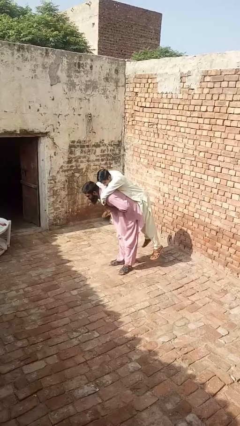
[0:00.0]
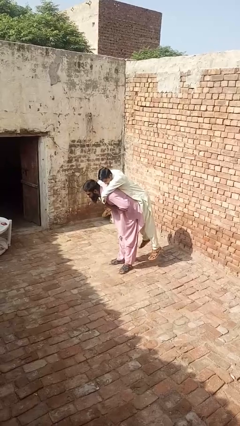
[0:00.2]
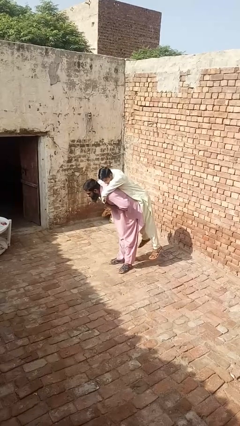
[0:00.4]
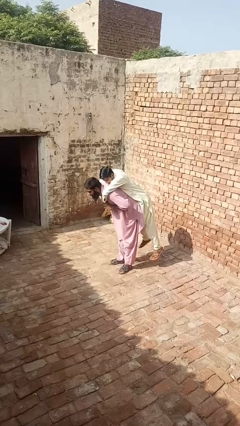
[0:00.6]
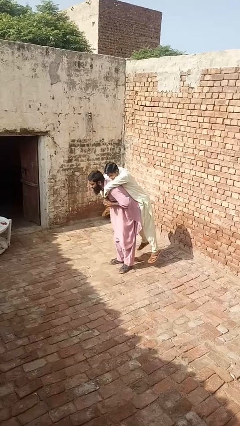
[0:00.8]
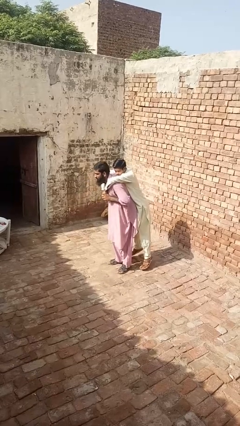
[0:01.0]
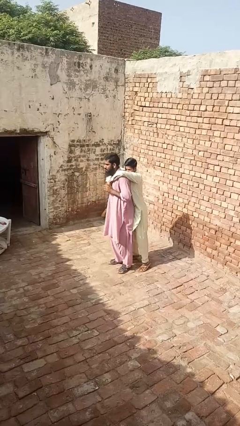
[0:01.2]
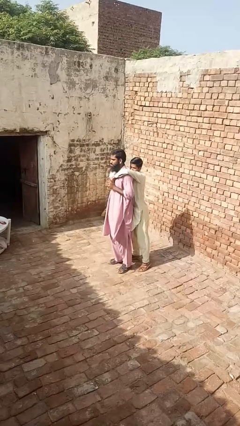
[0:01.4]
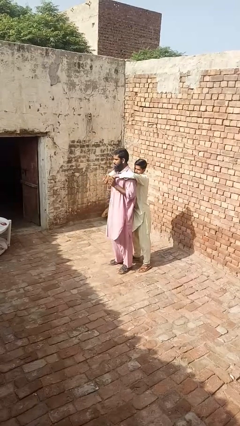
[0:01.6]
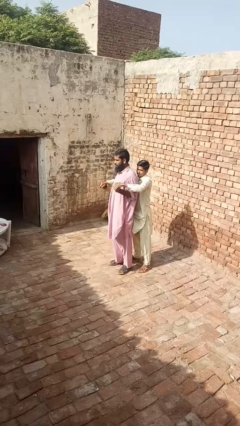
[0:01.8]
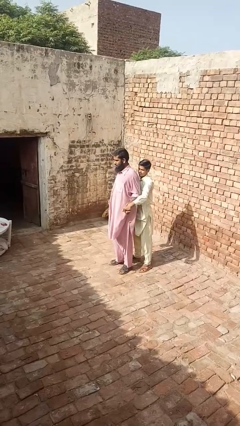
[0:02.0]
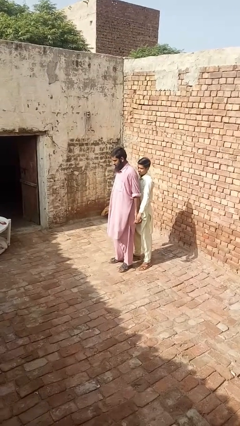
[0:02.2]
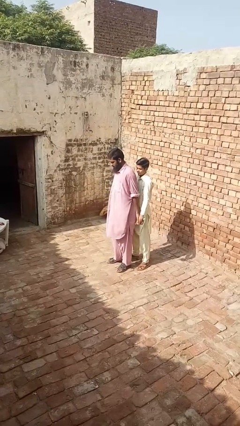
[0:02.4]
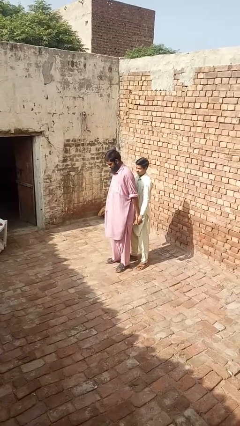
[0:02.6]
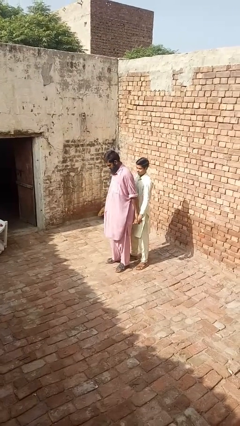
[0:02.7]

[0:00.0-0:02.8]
person puts down person

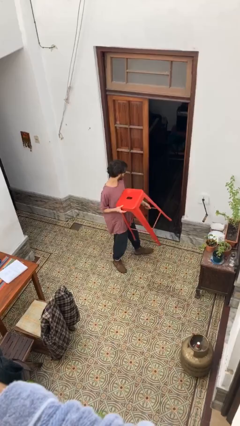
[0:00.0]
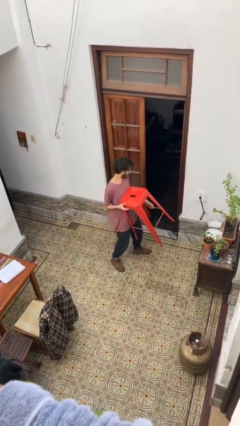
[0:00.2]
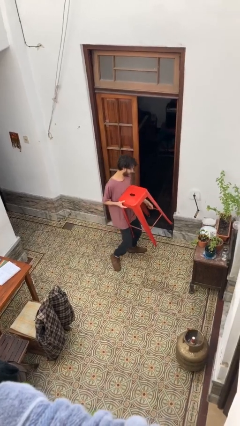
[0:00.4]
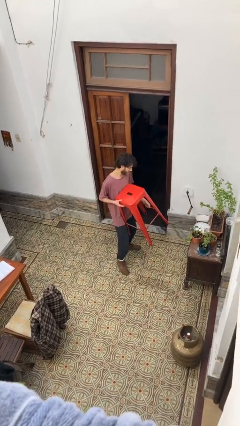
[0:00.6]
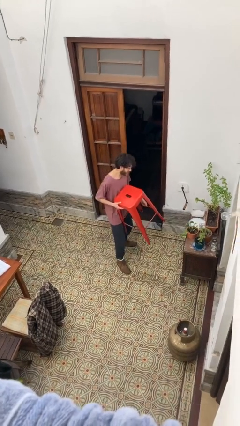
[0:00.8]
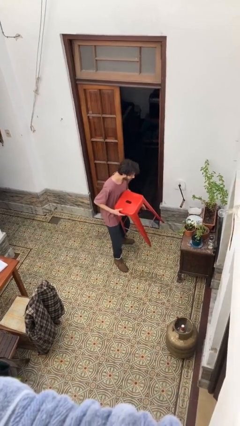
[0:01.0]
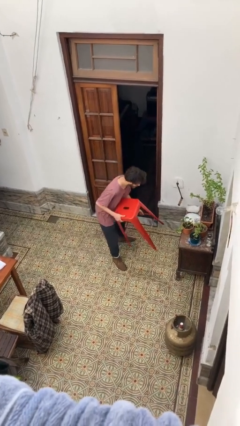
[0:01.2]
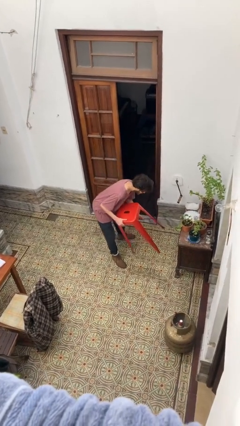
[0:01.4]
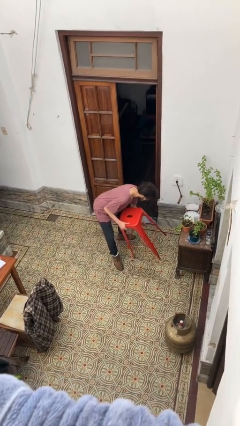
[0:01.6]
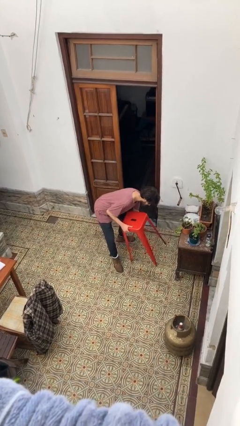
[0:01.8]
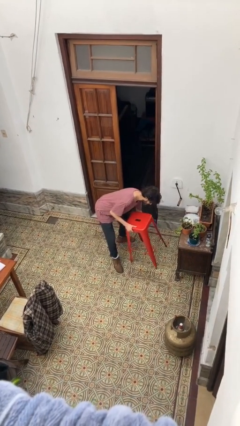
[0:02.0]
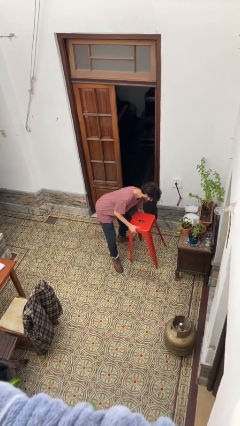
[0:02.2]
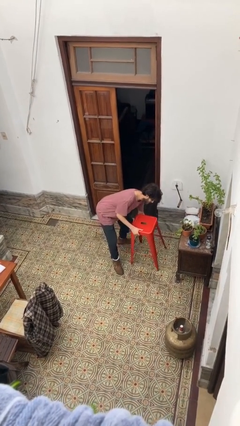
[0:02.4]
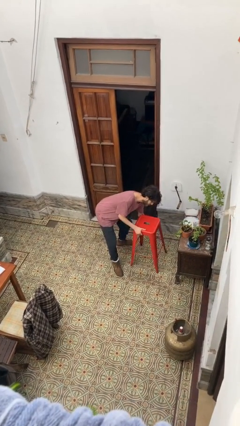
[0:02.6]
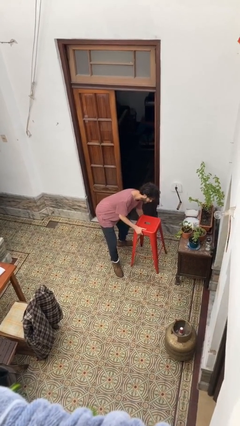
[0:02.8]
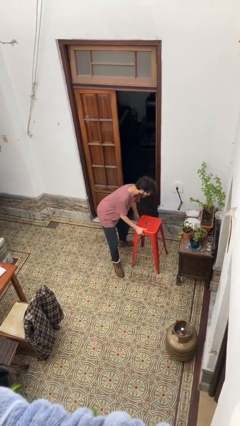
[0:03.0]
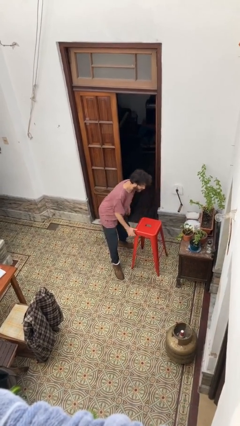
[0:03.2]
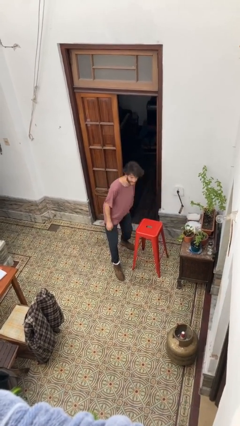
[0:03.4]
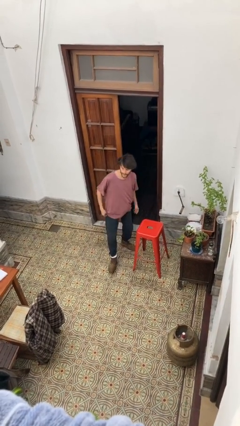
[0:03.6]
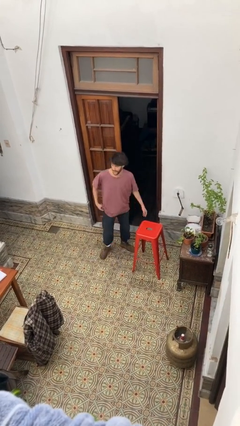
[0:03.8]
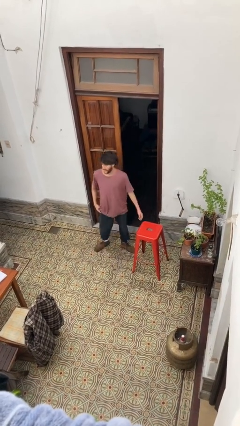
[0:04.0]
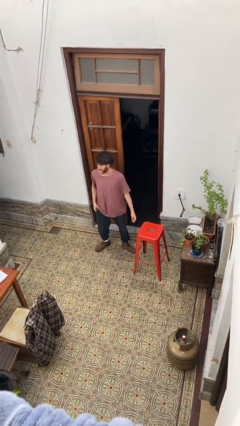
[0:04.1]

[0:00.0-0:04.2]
person puts down object on floor

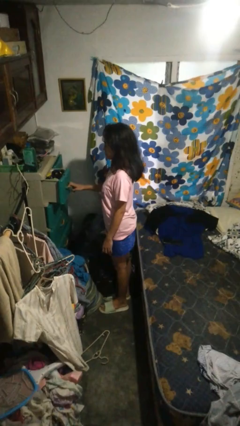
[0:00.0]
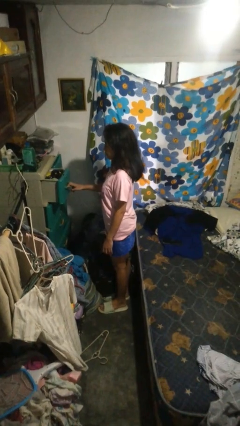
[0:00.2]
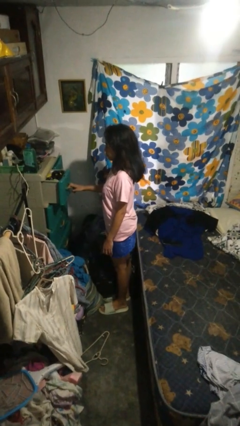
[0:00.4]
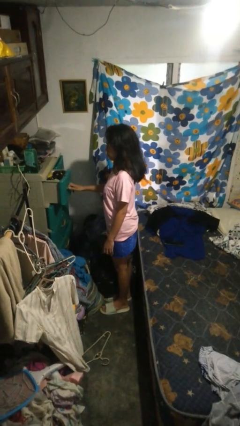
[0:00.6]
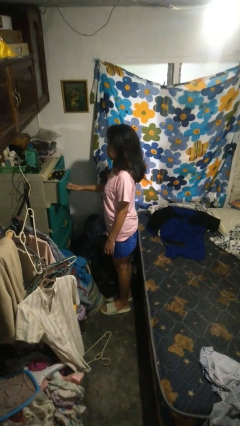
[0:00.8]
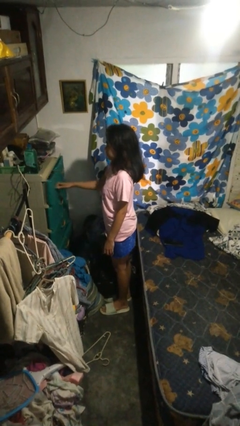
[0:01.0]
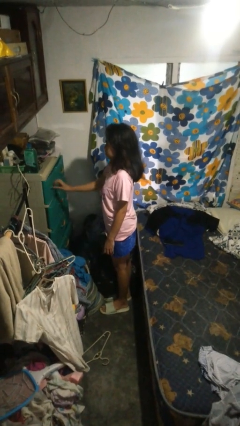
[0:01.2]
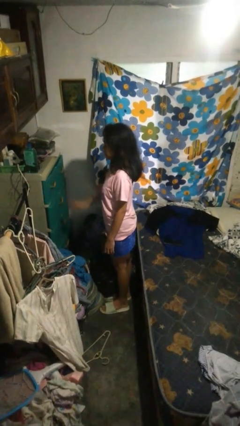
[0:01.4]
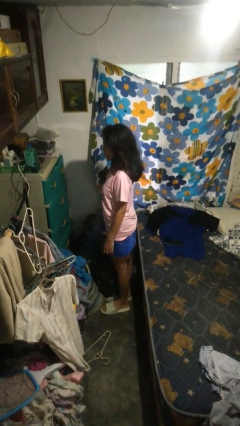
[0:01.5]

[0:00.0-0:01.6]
person closes dresser drawer

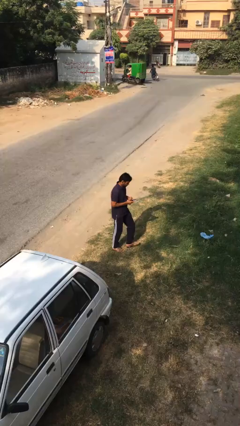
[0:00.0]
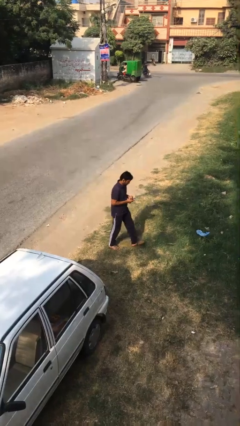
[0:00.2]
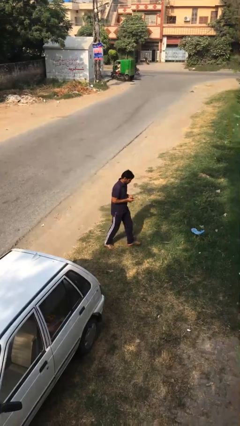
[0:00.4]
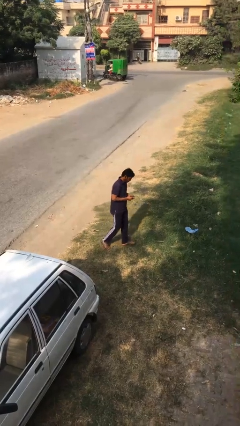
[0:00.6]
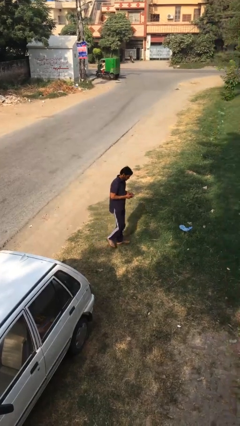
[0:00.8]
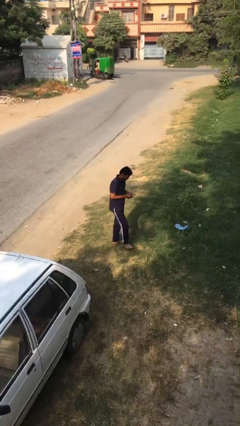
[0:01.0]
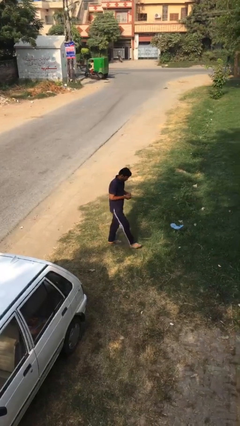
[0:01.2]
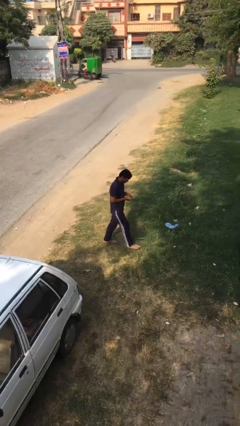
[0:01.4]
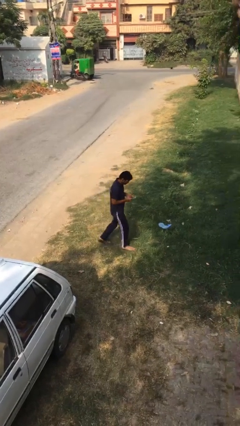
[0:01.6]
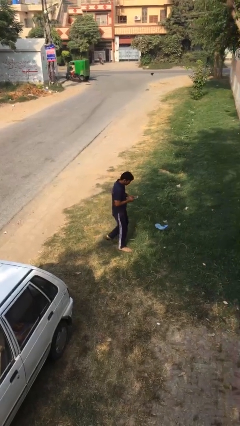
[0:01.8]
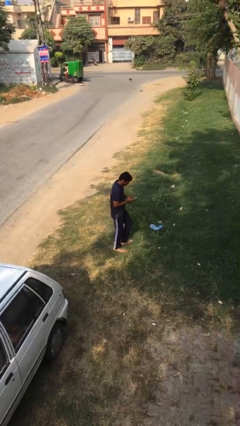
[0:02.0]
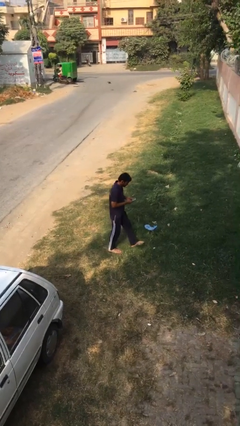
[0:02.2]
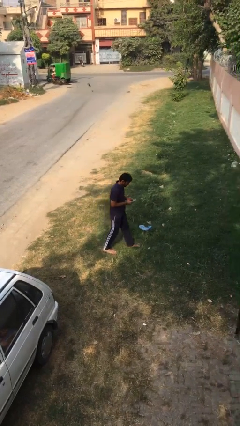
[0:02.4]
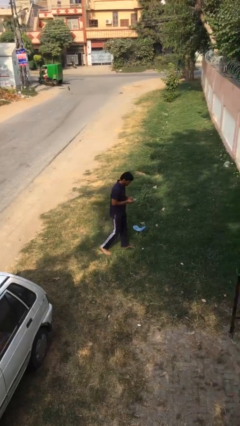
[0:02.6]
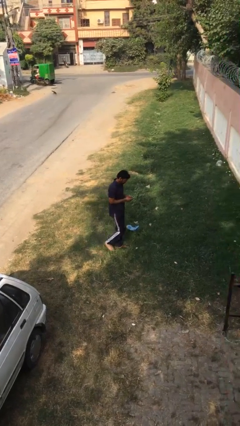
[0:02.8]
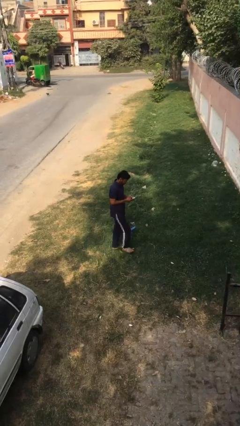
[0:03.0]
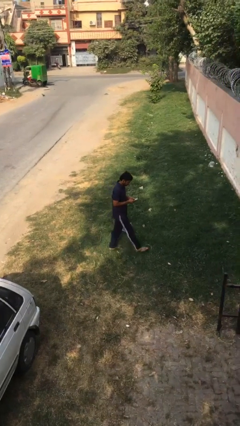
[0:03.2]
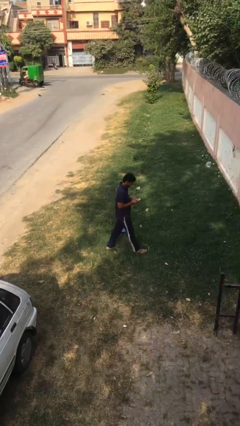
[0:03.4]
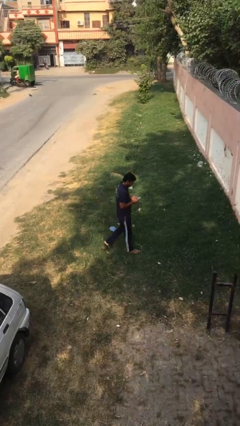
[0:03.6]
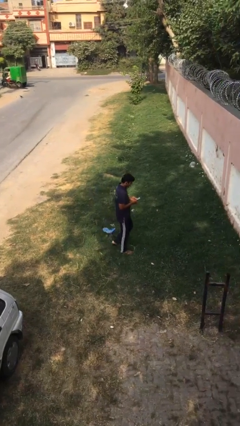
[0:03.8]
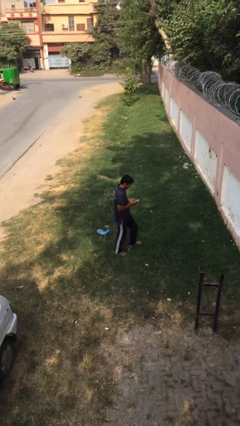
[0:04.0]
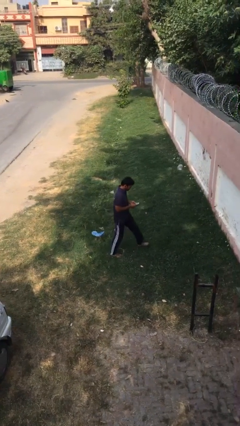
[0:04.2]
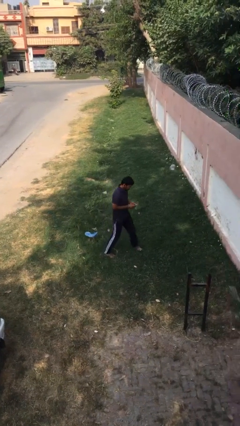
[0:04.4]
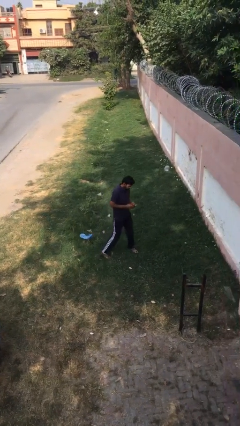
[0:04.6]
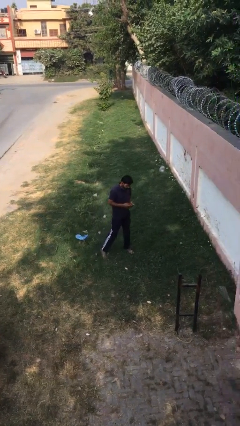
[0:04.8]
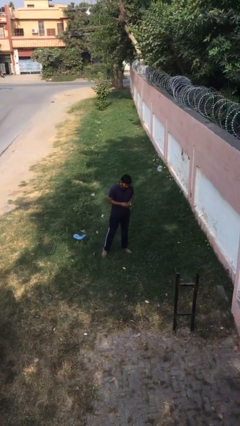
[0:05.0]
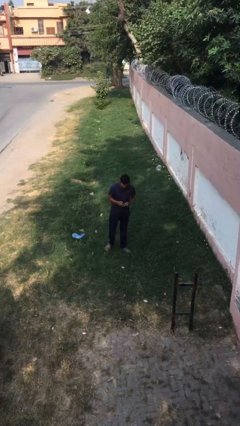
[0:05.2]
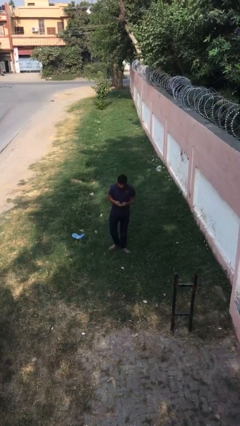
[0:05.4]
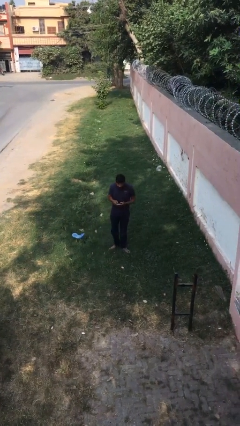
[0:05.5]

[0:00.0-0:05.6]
person texts on phone

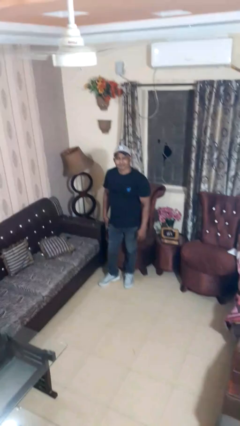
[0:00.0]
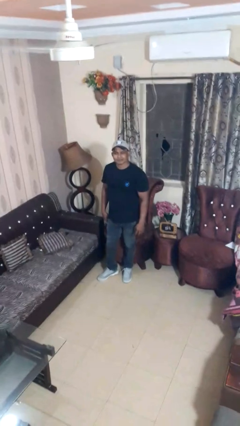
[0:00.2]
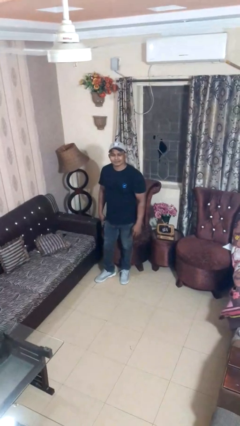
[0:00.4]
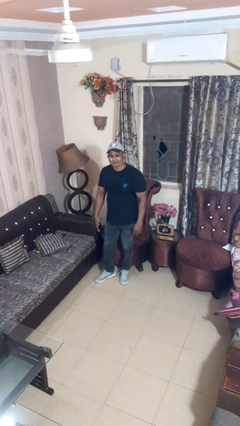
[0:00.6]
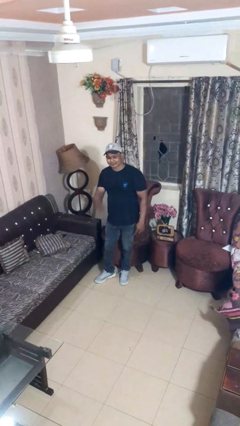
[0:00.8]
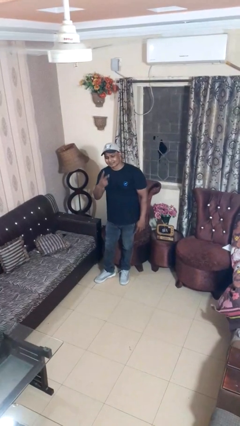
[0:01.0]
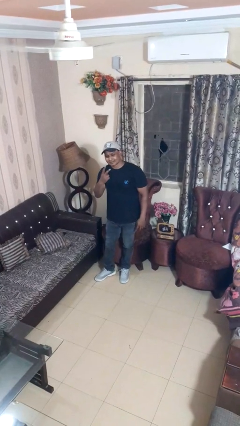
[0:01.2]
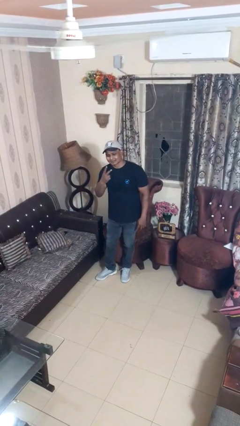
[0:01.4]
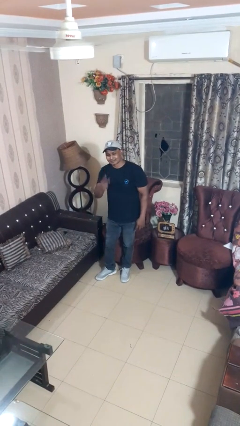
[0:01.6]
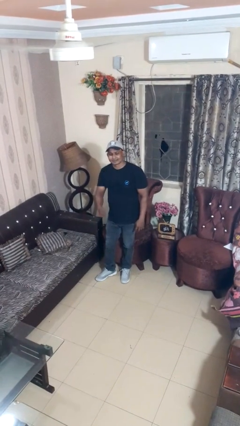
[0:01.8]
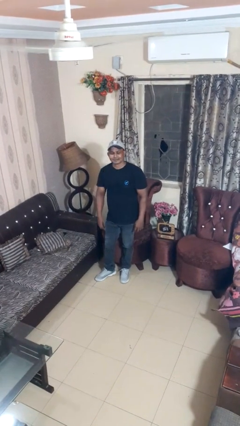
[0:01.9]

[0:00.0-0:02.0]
person gestures peace

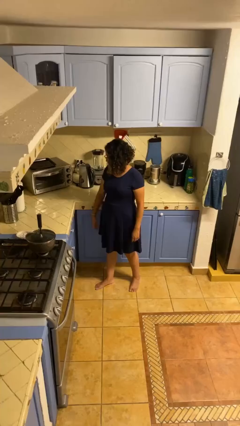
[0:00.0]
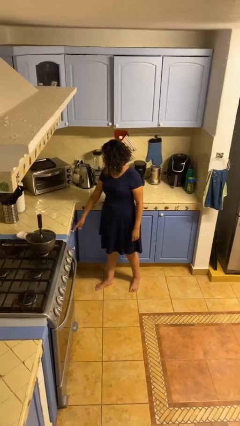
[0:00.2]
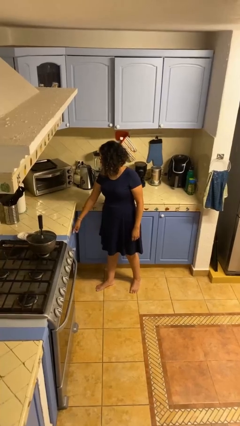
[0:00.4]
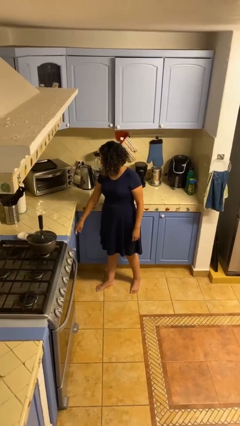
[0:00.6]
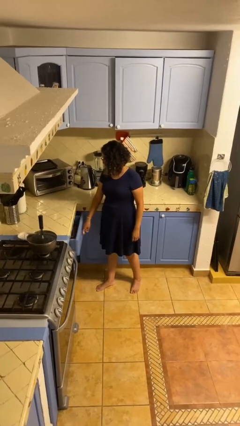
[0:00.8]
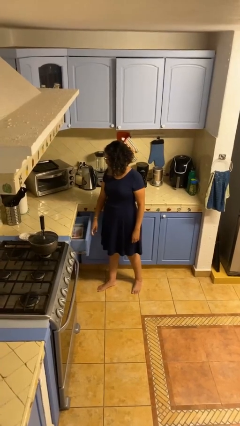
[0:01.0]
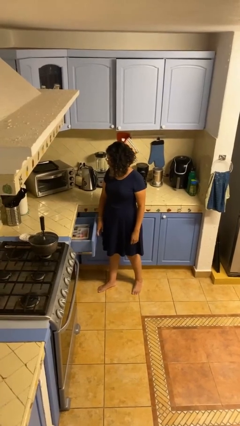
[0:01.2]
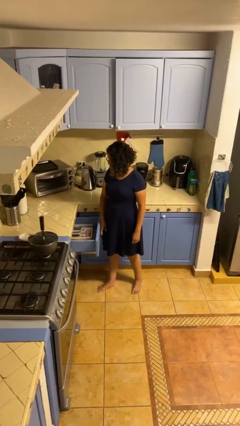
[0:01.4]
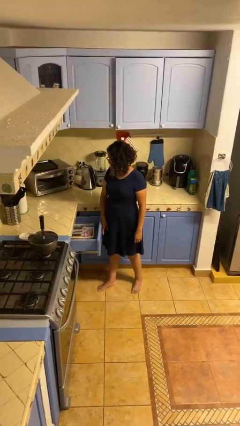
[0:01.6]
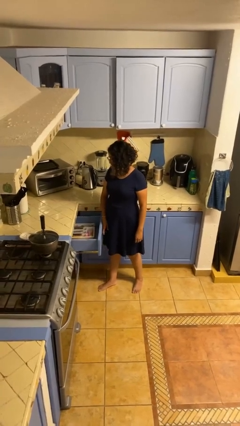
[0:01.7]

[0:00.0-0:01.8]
person opens kitchen drawer
